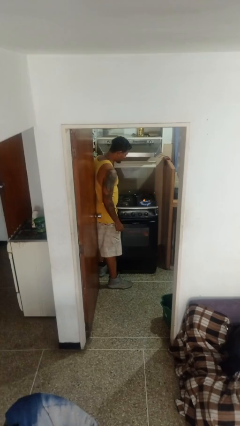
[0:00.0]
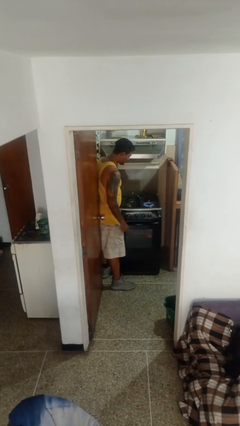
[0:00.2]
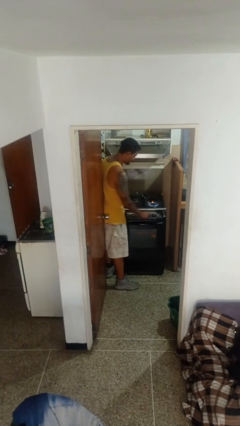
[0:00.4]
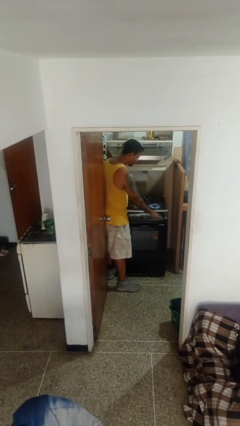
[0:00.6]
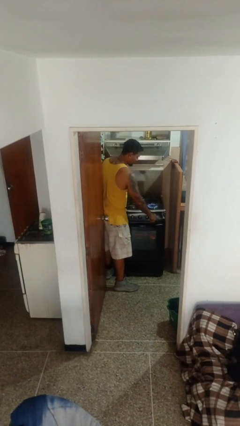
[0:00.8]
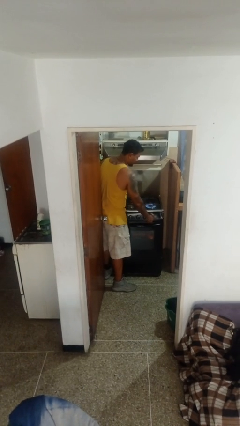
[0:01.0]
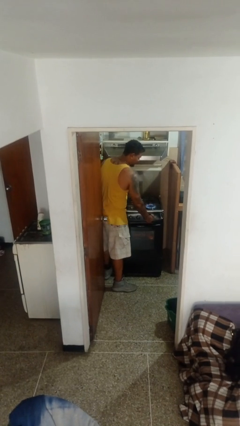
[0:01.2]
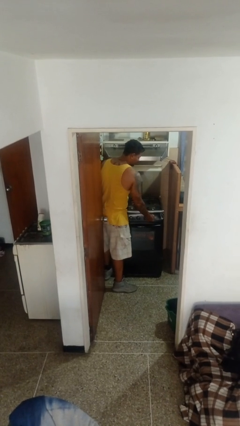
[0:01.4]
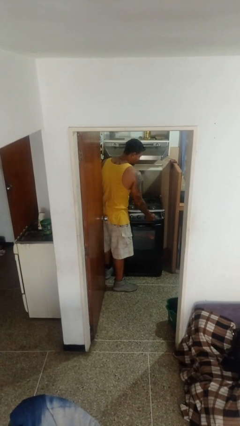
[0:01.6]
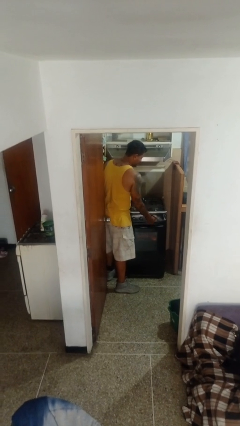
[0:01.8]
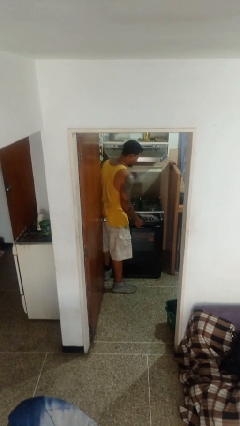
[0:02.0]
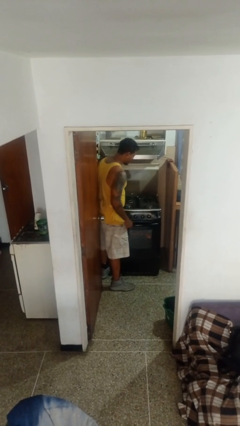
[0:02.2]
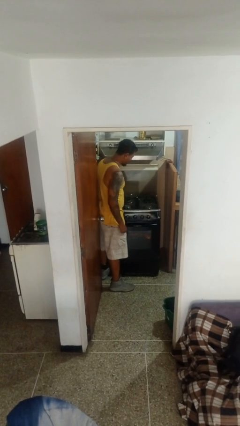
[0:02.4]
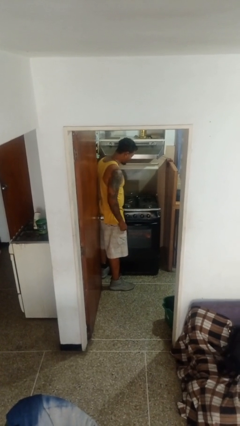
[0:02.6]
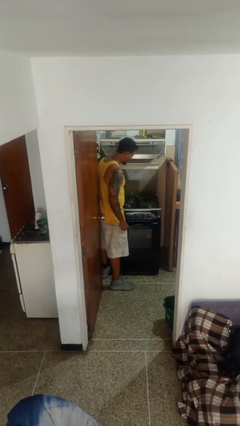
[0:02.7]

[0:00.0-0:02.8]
person turns off stovetop

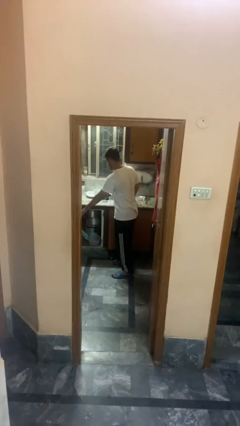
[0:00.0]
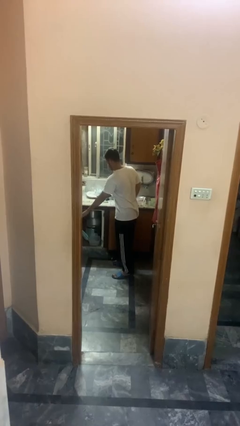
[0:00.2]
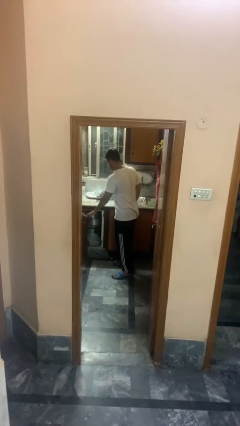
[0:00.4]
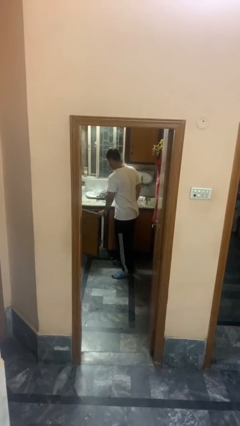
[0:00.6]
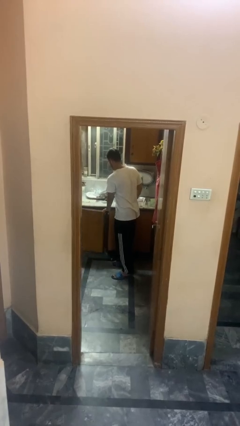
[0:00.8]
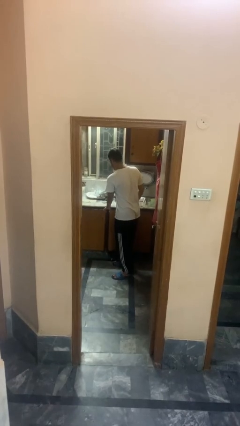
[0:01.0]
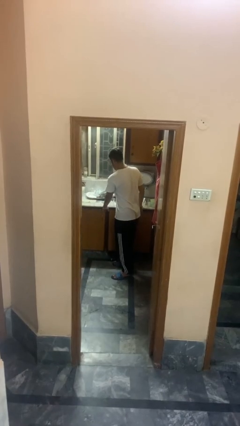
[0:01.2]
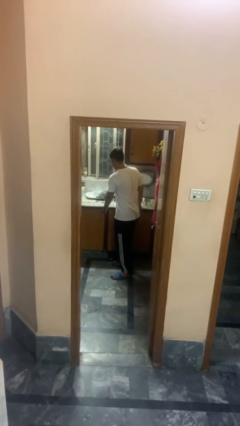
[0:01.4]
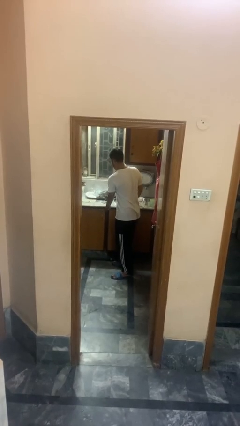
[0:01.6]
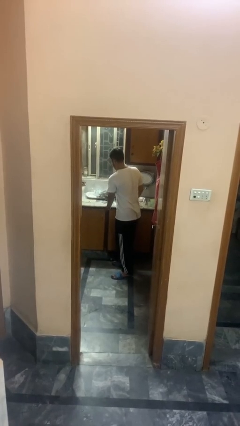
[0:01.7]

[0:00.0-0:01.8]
person closes cabinet

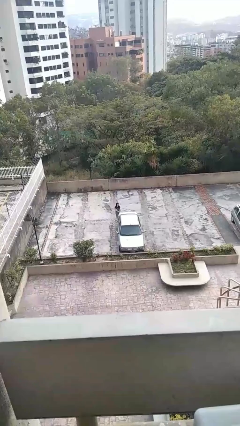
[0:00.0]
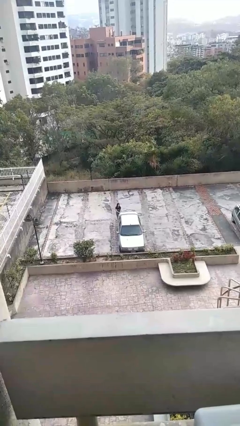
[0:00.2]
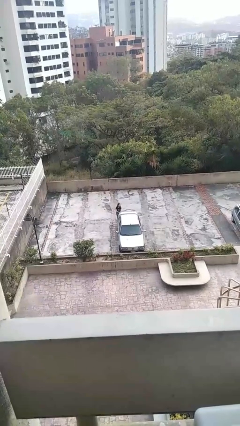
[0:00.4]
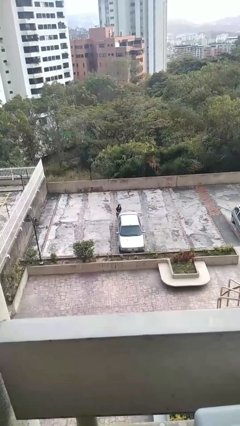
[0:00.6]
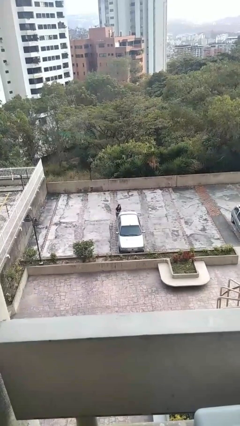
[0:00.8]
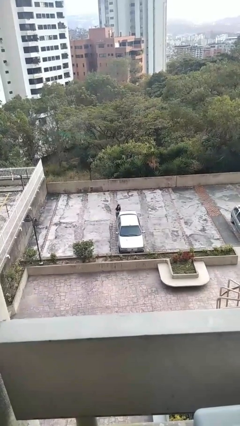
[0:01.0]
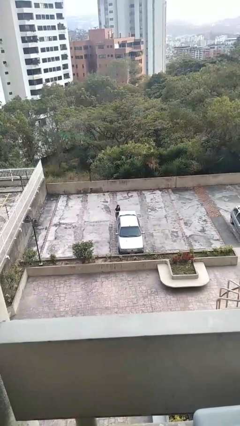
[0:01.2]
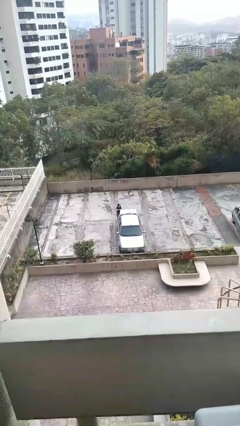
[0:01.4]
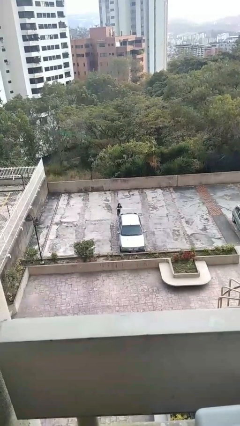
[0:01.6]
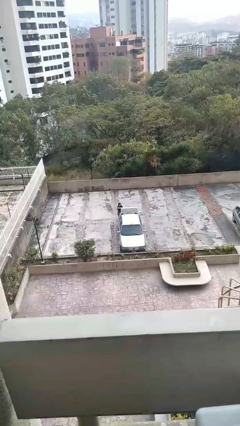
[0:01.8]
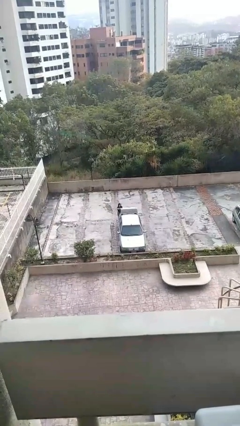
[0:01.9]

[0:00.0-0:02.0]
person opens car trunk

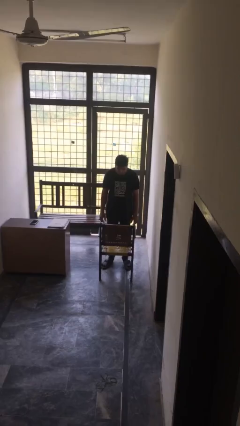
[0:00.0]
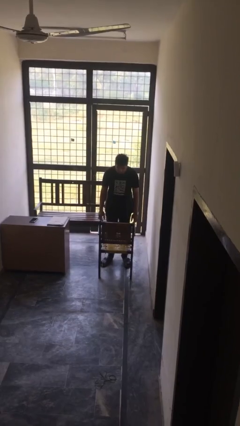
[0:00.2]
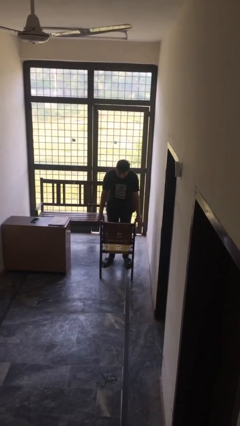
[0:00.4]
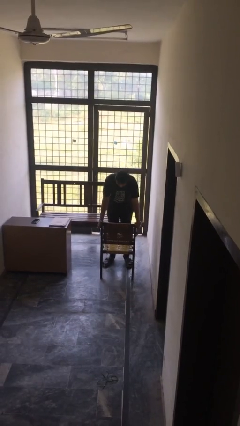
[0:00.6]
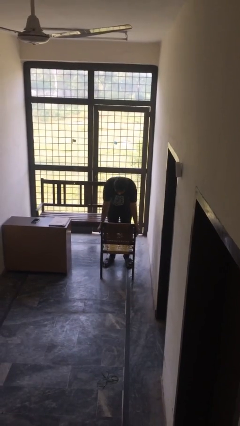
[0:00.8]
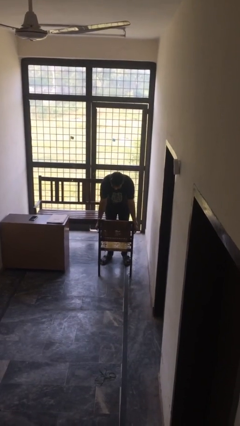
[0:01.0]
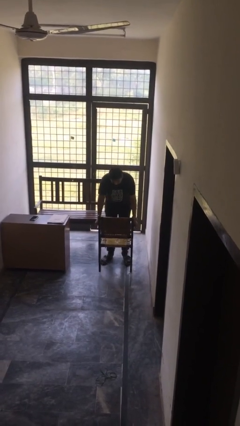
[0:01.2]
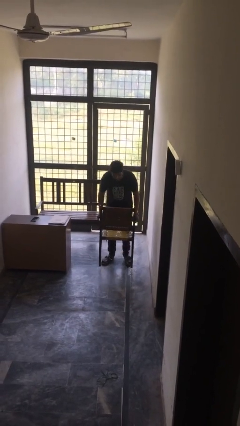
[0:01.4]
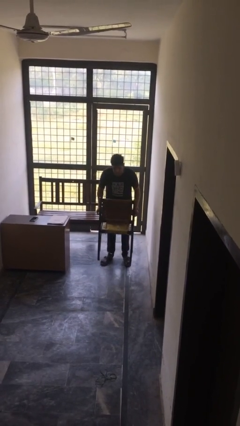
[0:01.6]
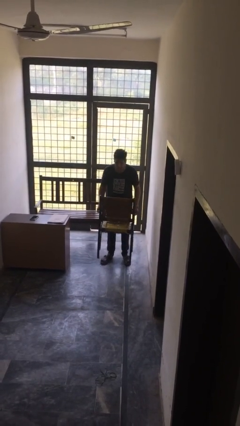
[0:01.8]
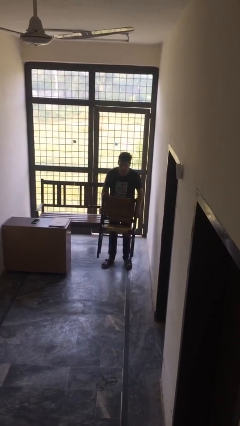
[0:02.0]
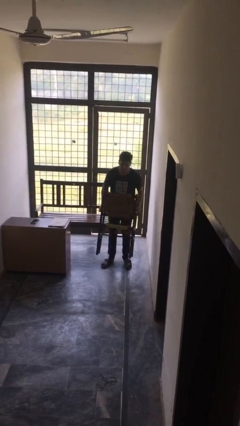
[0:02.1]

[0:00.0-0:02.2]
person picks up object from floor

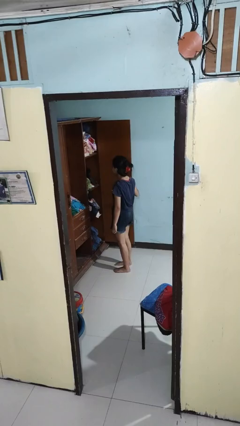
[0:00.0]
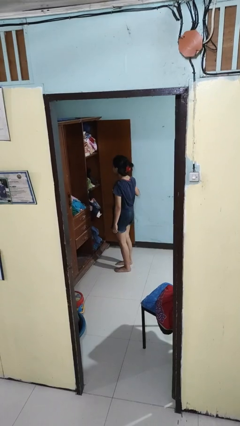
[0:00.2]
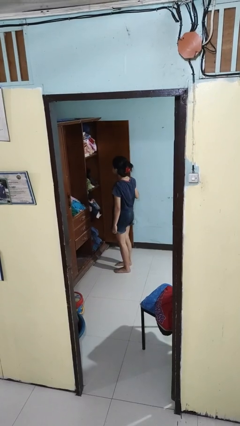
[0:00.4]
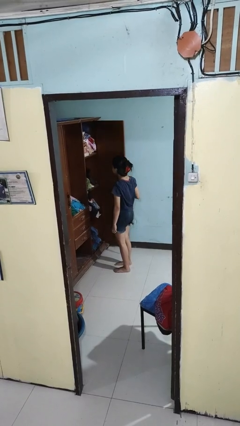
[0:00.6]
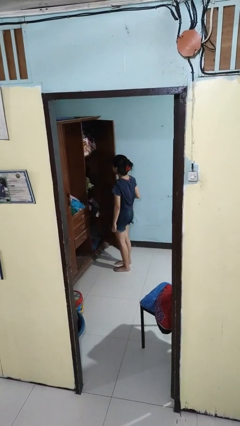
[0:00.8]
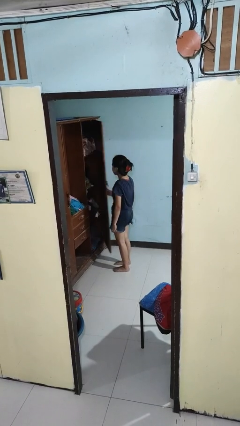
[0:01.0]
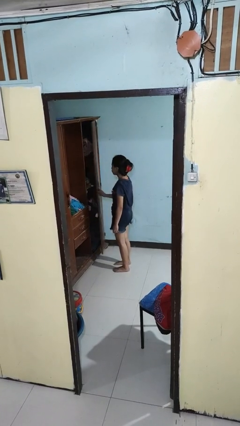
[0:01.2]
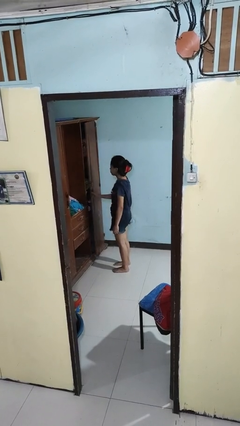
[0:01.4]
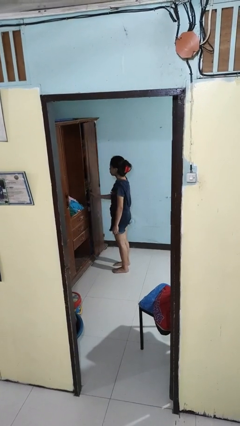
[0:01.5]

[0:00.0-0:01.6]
person closes closet door

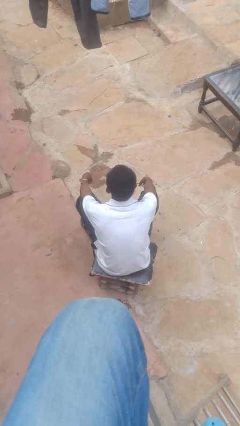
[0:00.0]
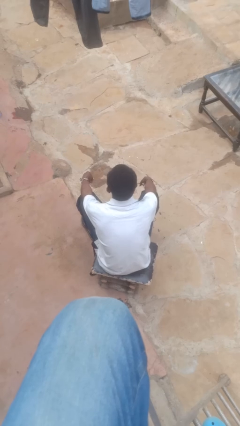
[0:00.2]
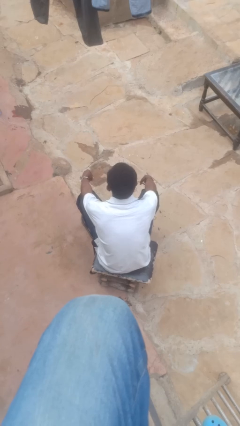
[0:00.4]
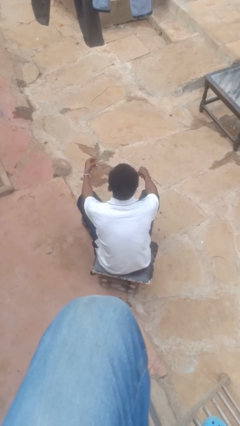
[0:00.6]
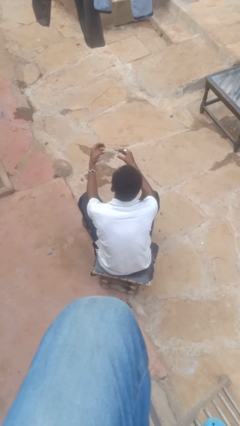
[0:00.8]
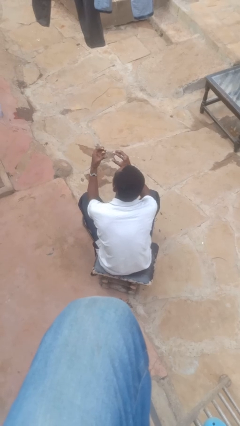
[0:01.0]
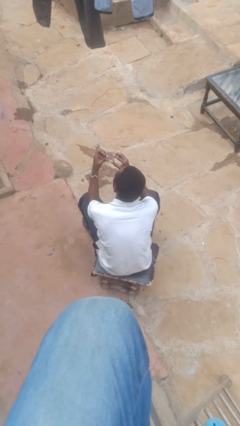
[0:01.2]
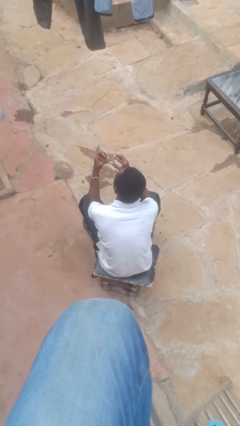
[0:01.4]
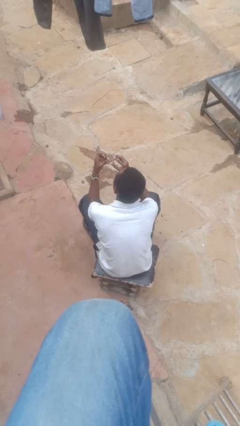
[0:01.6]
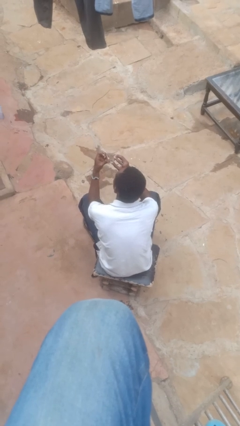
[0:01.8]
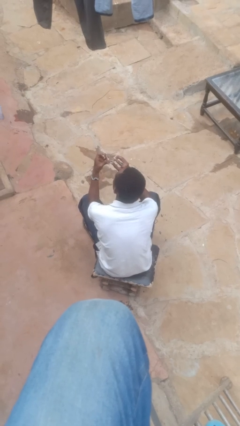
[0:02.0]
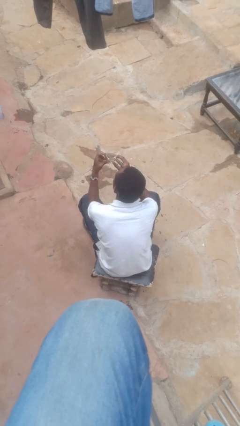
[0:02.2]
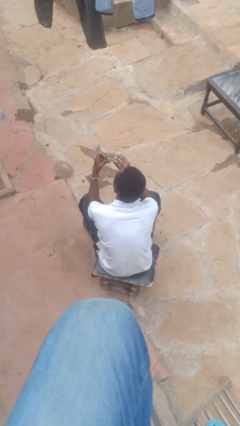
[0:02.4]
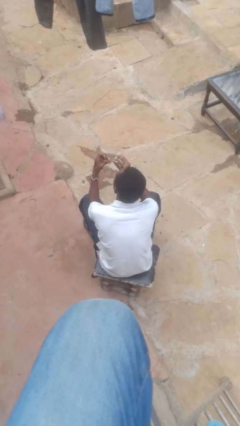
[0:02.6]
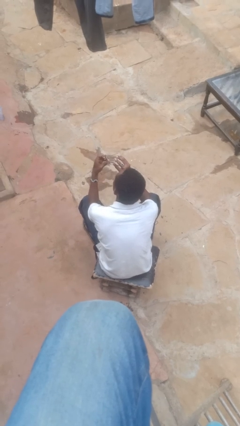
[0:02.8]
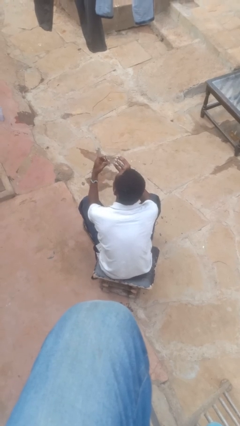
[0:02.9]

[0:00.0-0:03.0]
person clips fingernails

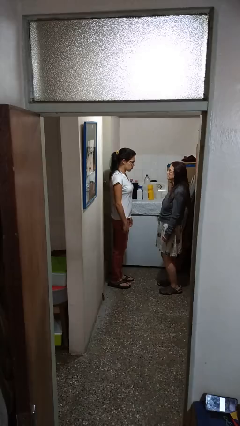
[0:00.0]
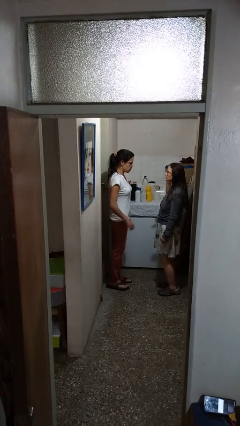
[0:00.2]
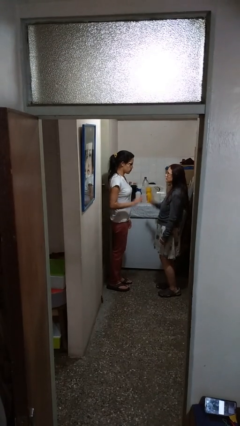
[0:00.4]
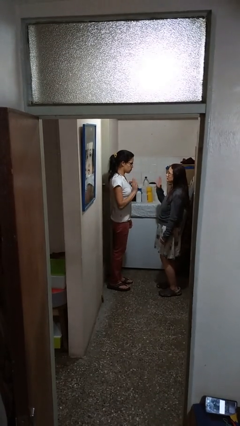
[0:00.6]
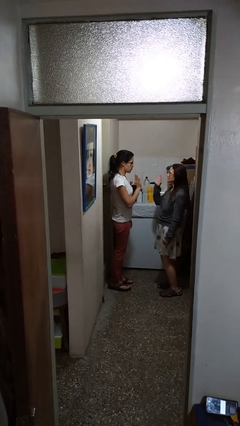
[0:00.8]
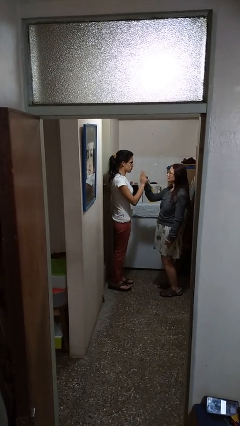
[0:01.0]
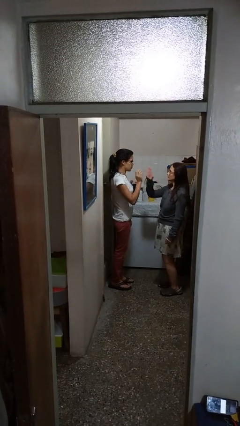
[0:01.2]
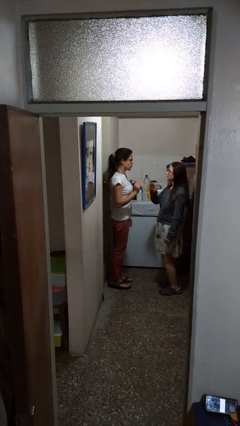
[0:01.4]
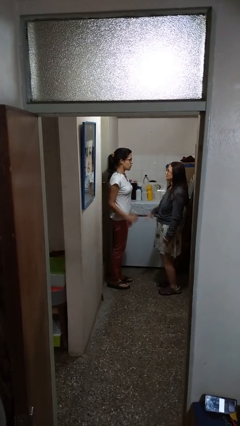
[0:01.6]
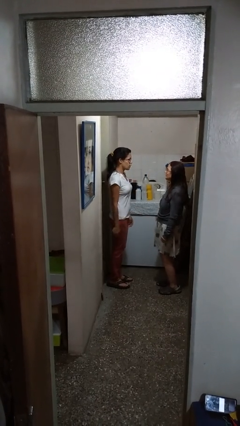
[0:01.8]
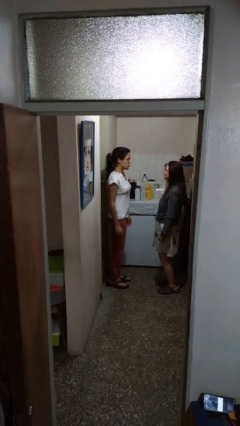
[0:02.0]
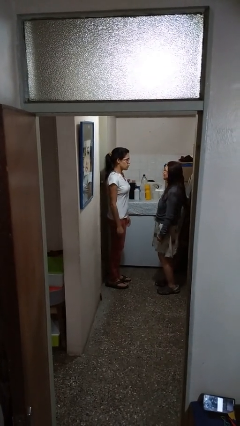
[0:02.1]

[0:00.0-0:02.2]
person highfives hand

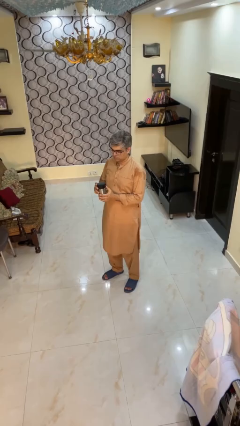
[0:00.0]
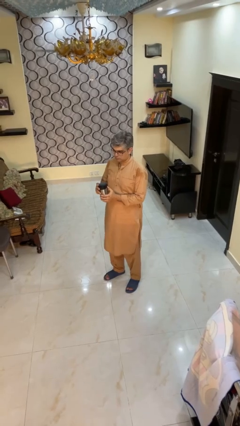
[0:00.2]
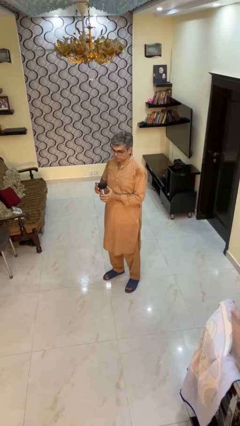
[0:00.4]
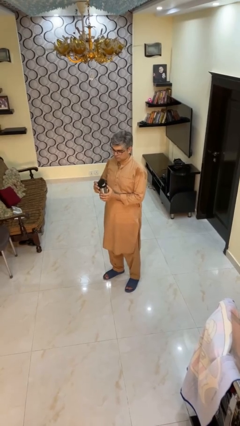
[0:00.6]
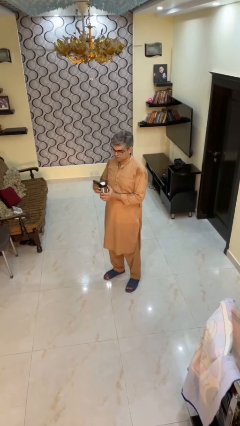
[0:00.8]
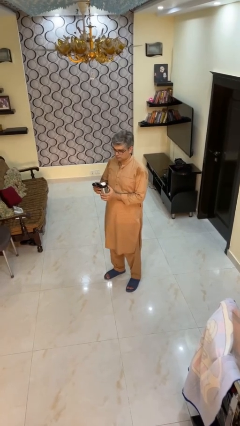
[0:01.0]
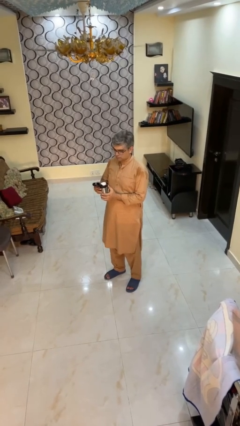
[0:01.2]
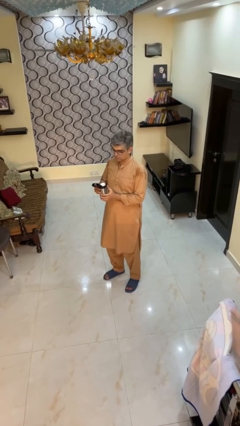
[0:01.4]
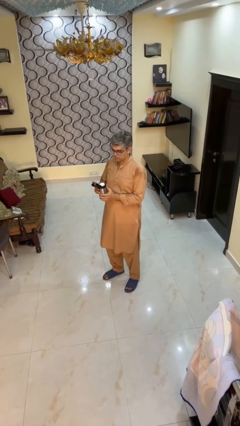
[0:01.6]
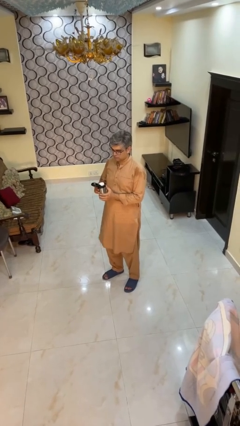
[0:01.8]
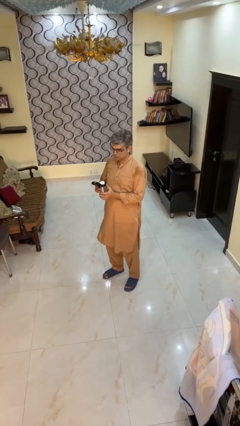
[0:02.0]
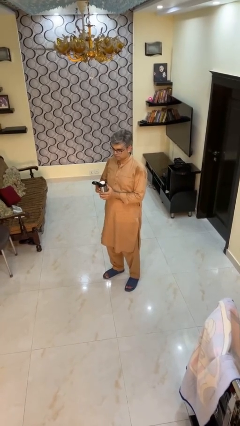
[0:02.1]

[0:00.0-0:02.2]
person opens beverage can
